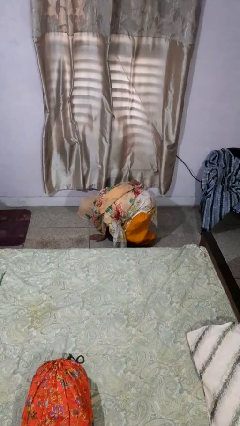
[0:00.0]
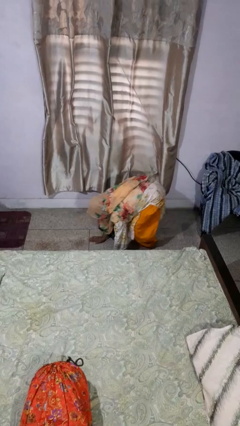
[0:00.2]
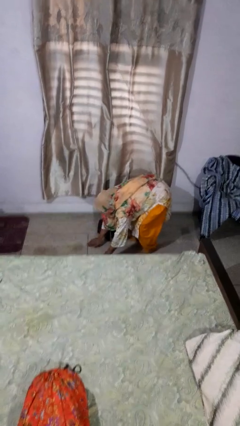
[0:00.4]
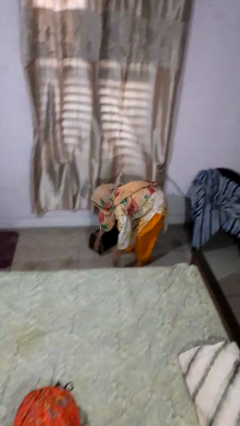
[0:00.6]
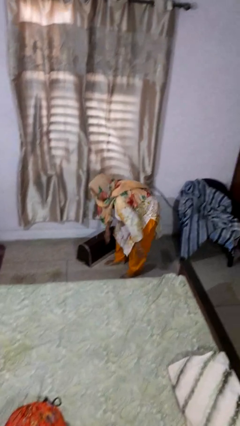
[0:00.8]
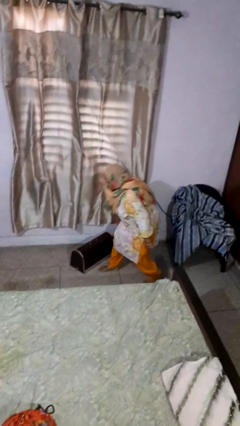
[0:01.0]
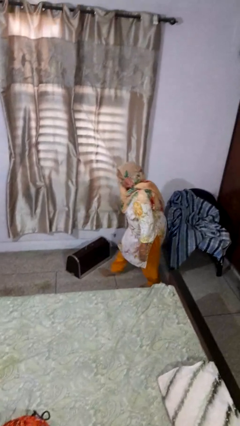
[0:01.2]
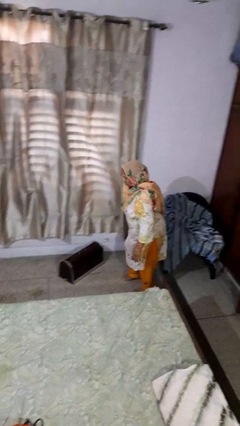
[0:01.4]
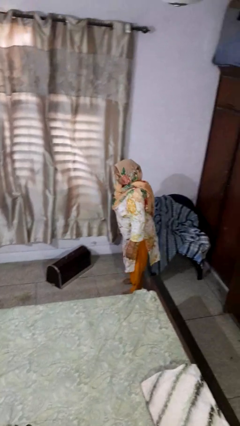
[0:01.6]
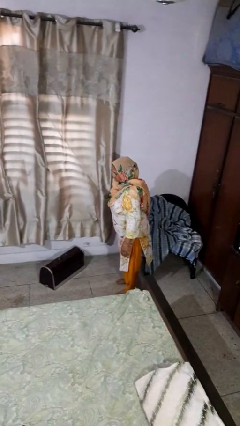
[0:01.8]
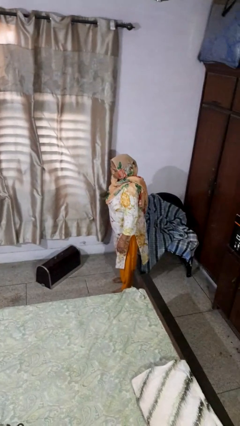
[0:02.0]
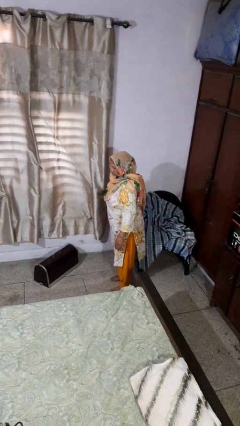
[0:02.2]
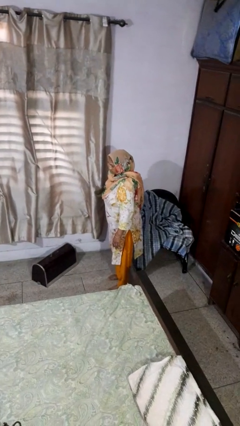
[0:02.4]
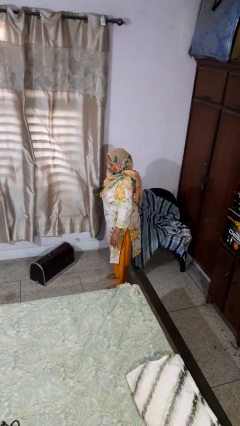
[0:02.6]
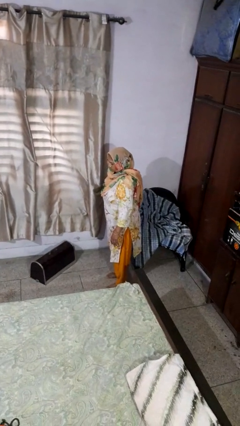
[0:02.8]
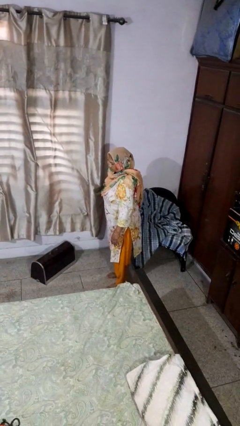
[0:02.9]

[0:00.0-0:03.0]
person stands up from floor

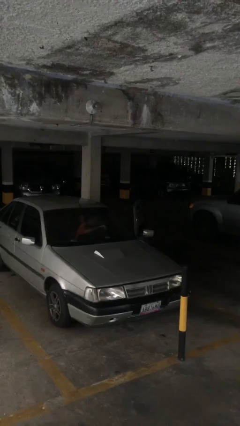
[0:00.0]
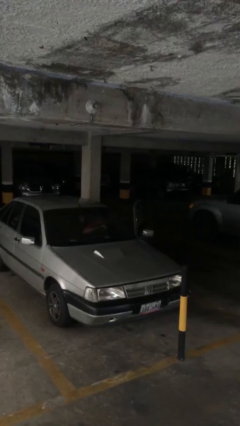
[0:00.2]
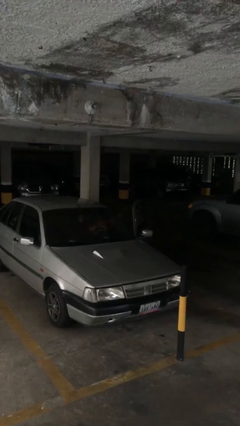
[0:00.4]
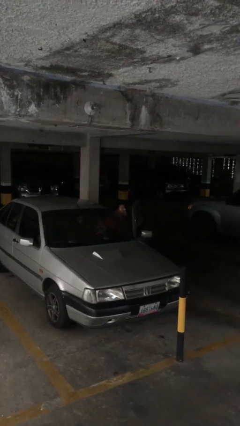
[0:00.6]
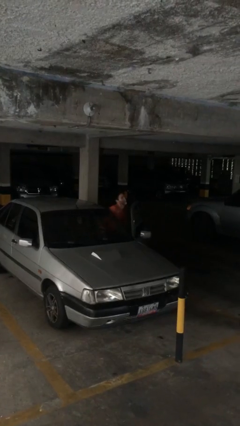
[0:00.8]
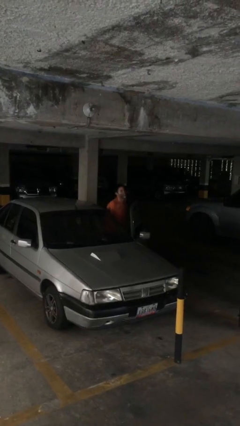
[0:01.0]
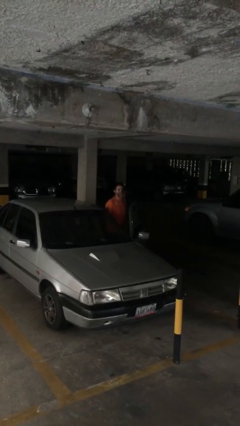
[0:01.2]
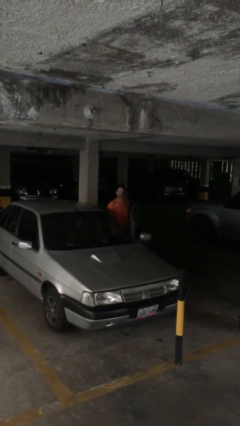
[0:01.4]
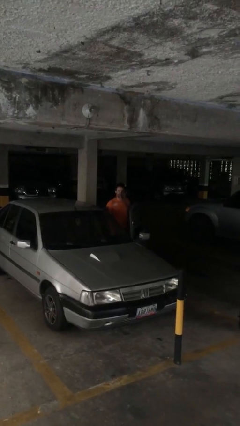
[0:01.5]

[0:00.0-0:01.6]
person exits car

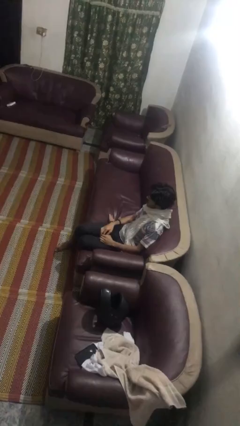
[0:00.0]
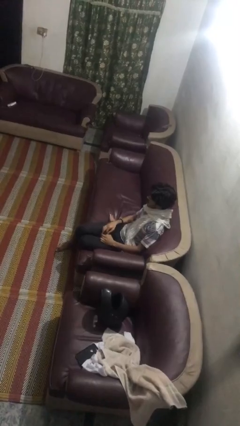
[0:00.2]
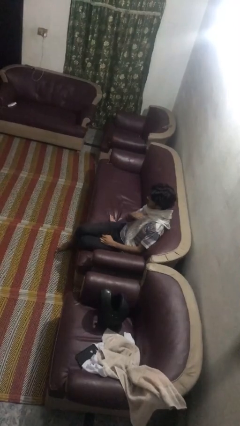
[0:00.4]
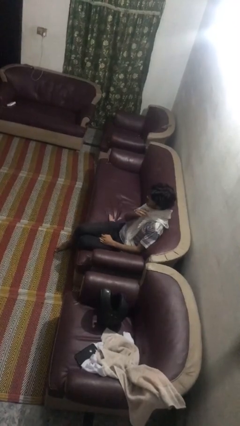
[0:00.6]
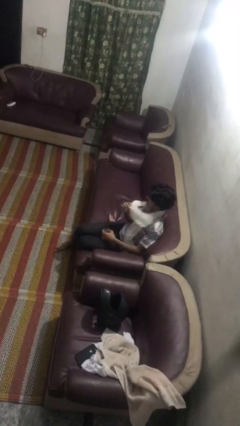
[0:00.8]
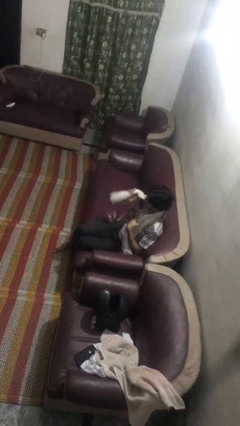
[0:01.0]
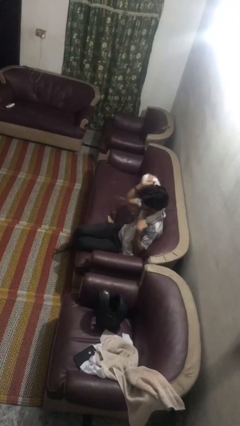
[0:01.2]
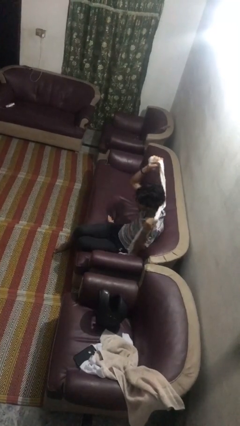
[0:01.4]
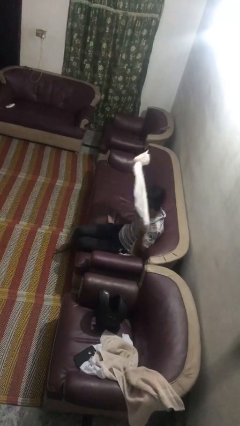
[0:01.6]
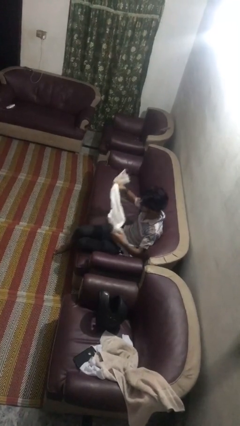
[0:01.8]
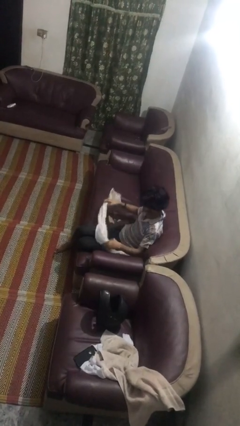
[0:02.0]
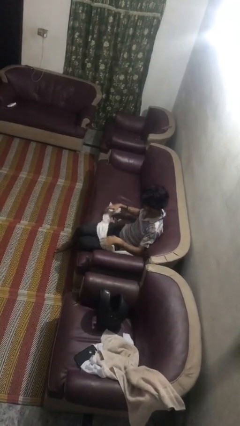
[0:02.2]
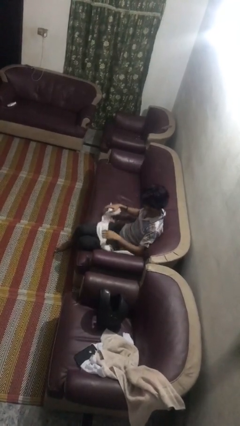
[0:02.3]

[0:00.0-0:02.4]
person takes off scarf

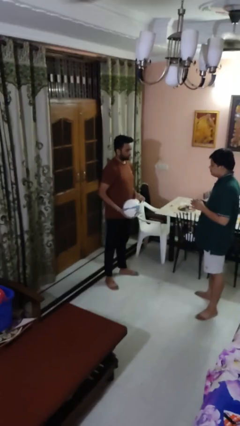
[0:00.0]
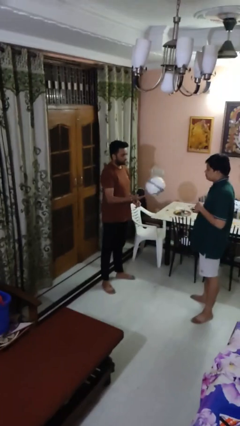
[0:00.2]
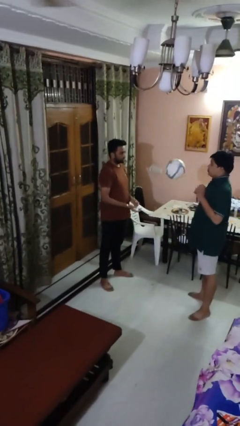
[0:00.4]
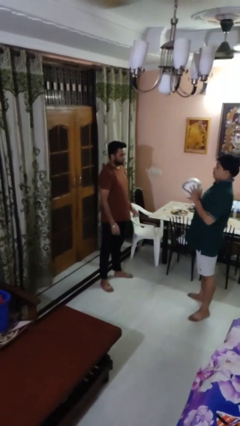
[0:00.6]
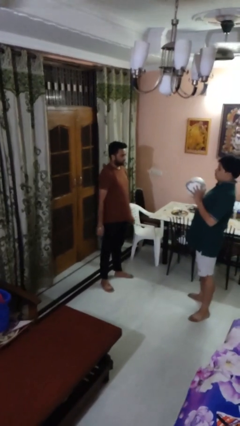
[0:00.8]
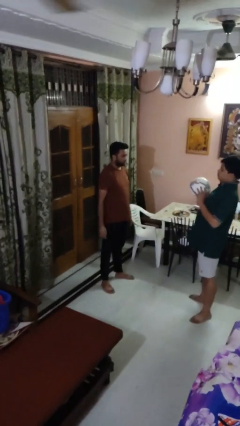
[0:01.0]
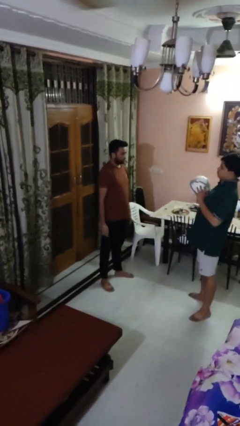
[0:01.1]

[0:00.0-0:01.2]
person throws object to person

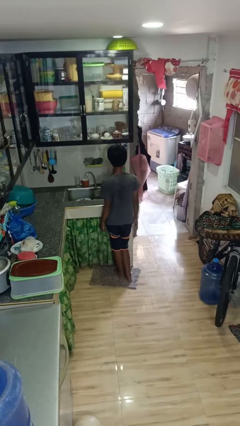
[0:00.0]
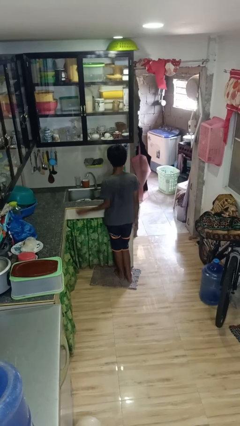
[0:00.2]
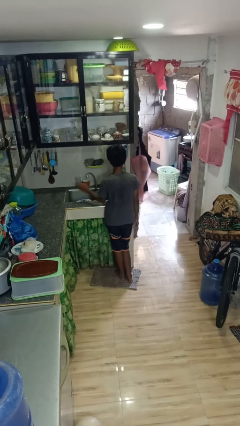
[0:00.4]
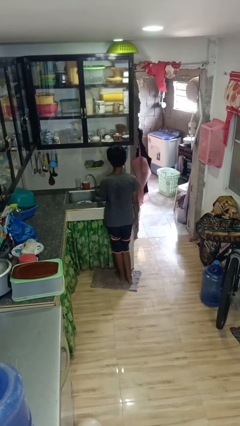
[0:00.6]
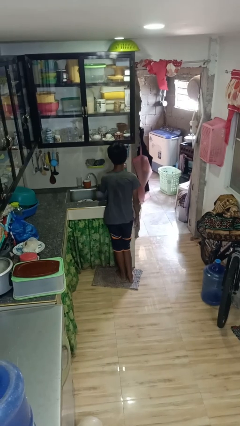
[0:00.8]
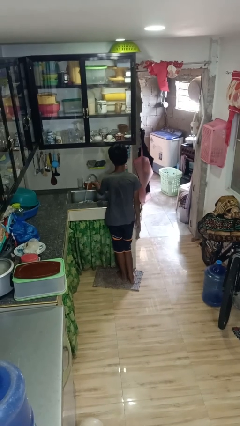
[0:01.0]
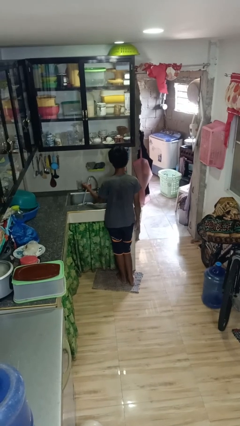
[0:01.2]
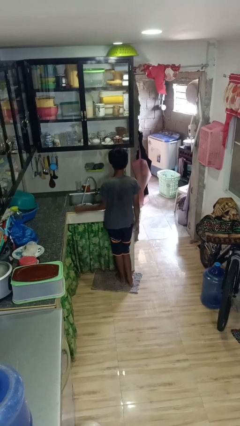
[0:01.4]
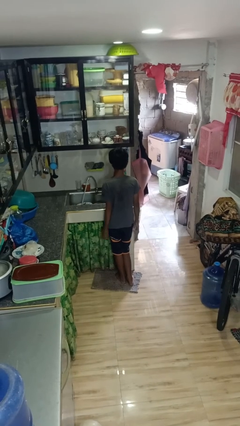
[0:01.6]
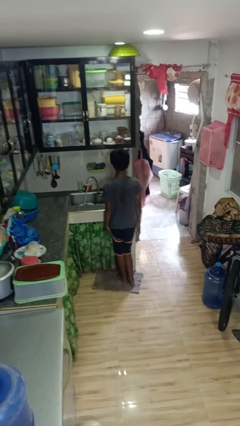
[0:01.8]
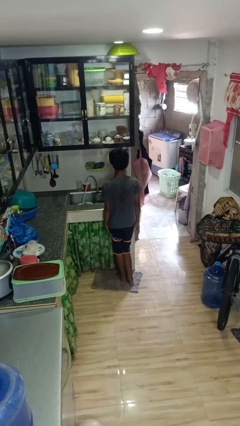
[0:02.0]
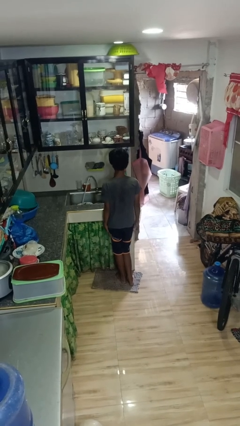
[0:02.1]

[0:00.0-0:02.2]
person turns on faucet

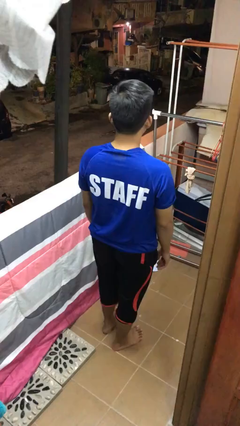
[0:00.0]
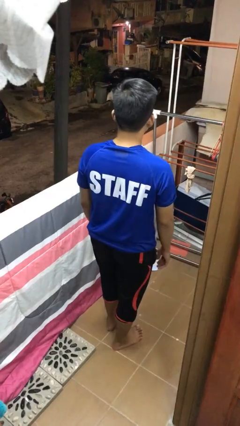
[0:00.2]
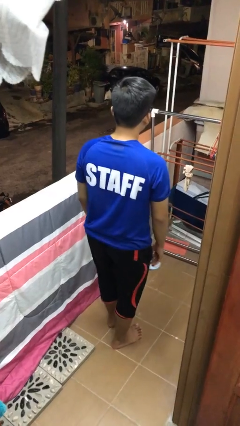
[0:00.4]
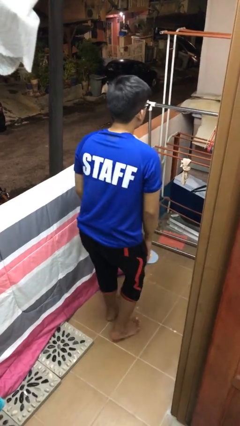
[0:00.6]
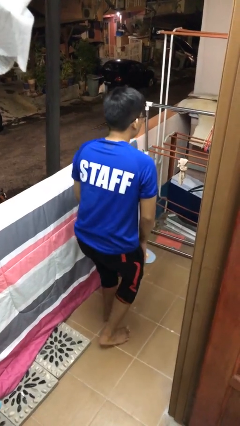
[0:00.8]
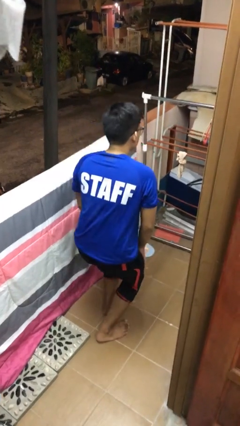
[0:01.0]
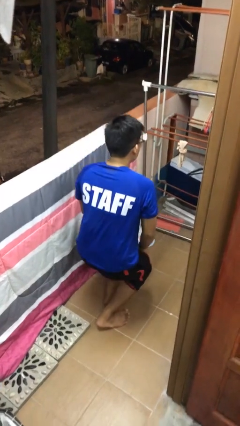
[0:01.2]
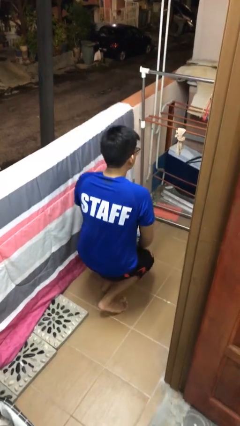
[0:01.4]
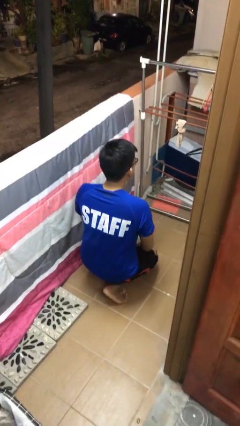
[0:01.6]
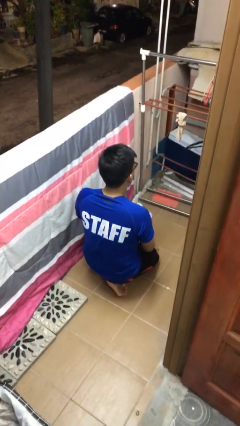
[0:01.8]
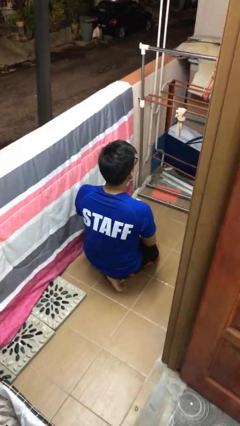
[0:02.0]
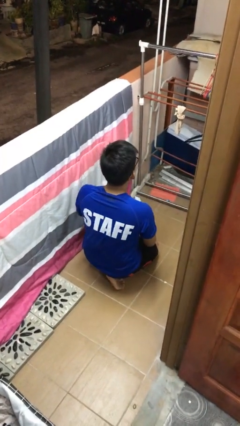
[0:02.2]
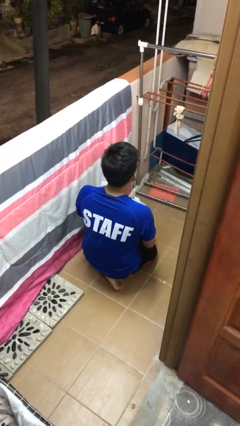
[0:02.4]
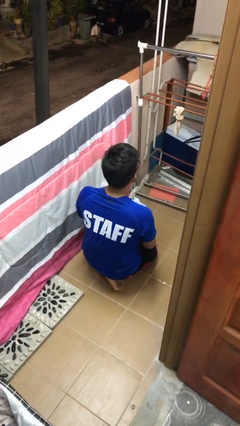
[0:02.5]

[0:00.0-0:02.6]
person kneels

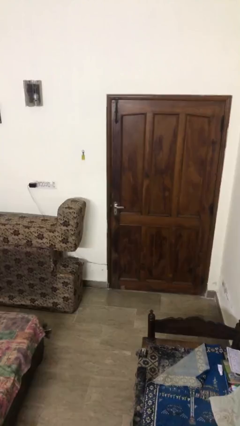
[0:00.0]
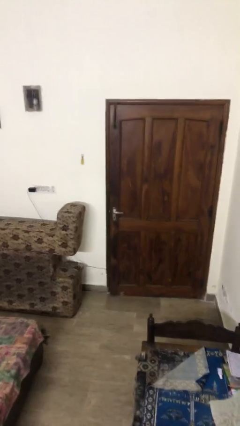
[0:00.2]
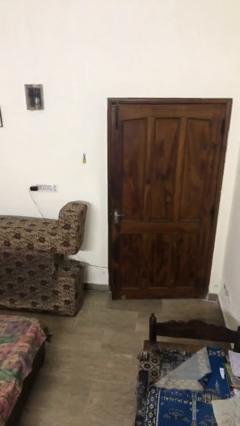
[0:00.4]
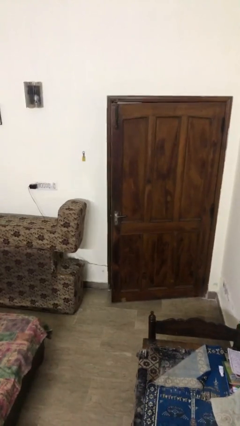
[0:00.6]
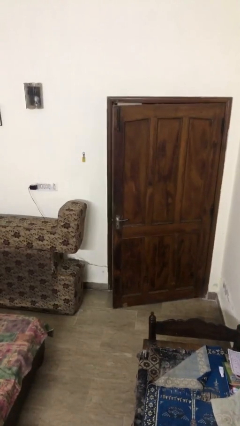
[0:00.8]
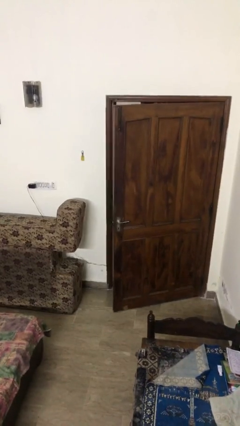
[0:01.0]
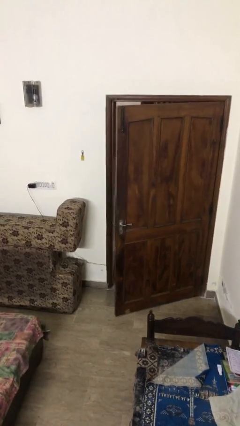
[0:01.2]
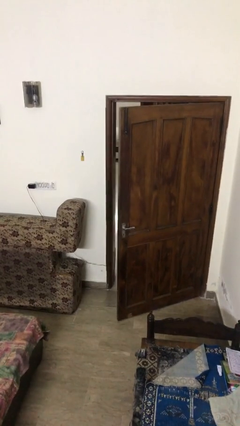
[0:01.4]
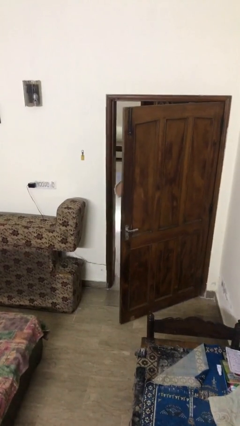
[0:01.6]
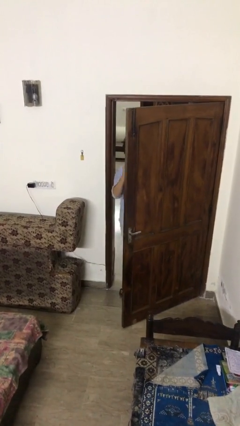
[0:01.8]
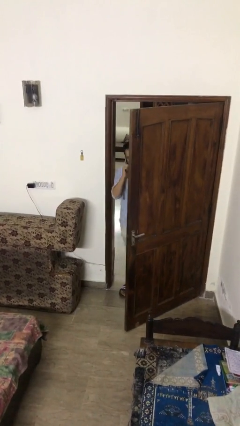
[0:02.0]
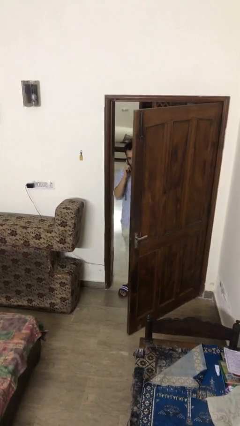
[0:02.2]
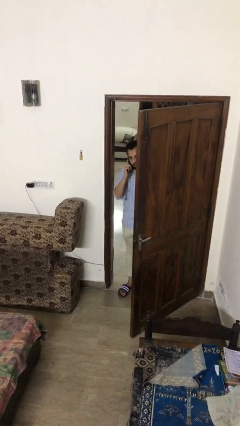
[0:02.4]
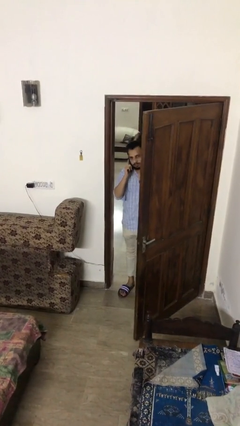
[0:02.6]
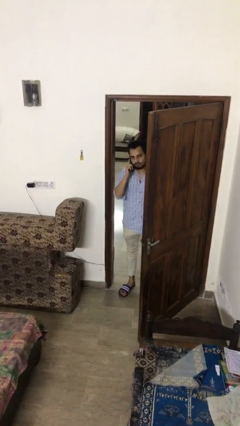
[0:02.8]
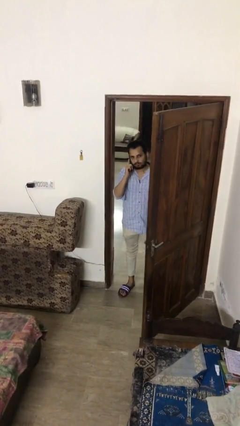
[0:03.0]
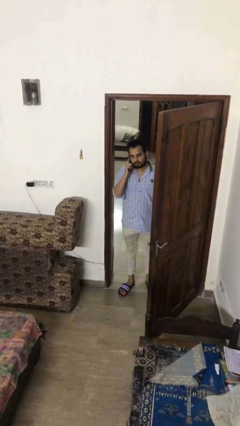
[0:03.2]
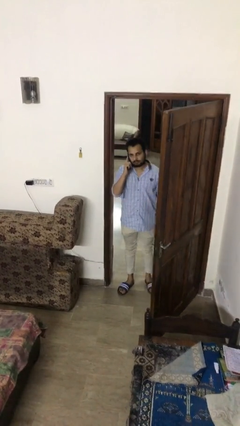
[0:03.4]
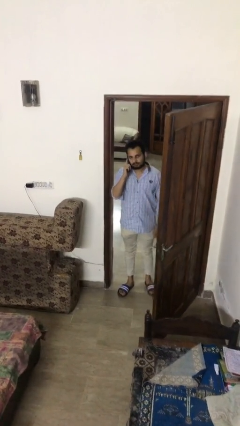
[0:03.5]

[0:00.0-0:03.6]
person opens facility door

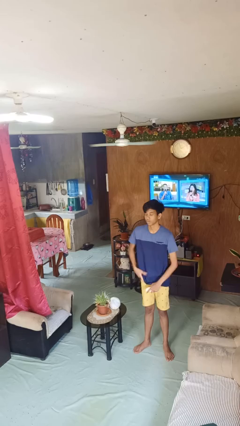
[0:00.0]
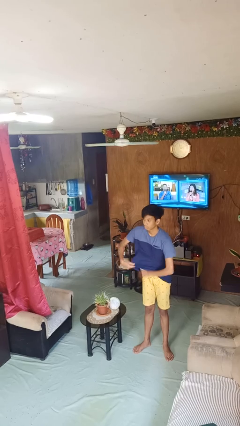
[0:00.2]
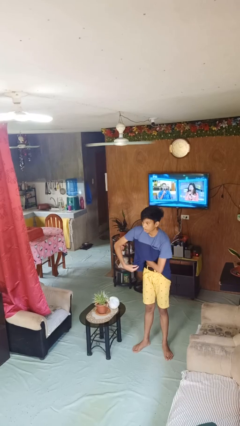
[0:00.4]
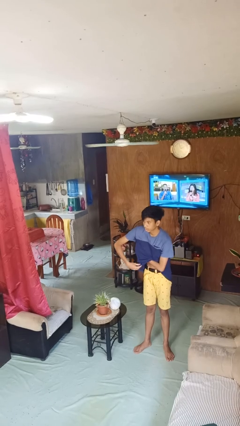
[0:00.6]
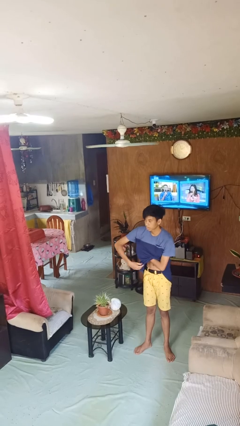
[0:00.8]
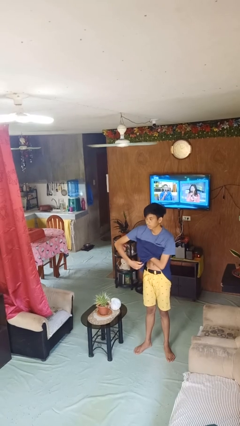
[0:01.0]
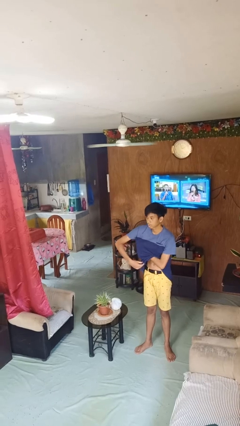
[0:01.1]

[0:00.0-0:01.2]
person applies deodorant
